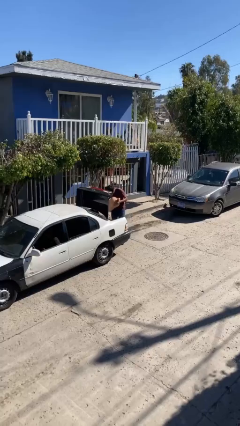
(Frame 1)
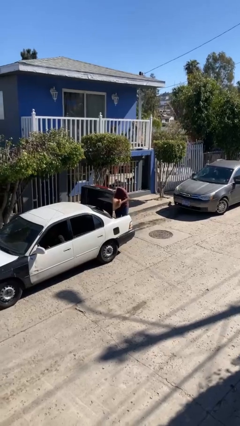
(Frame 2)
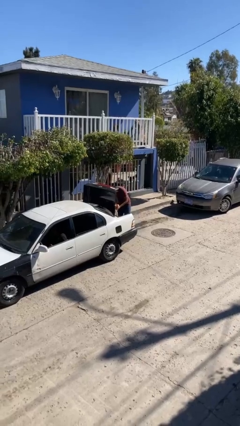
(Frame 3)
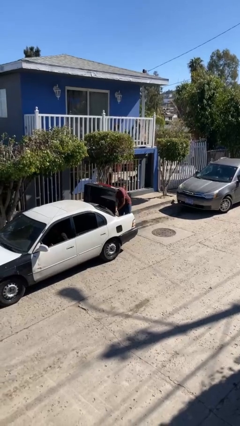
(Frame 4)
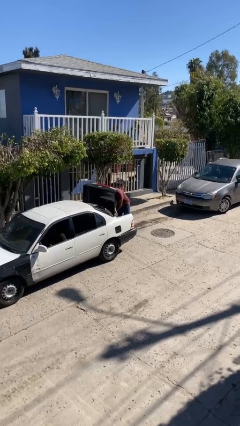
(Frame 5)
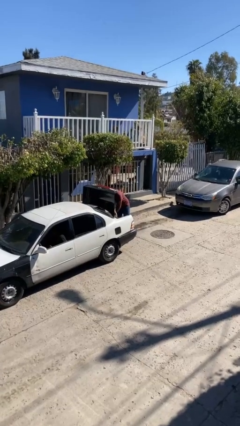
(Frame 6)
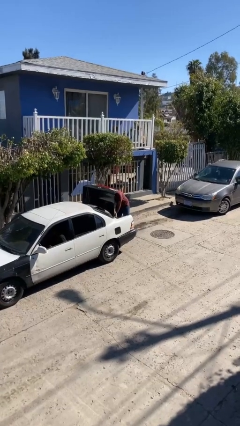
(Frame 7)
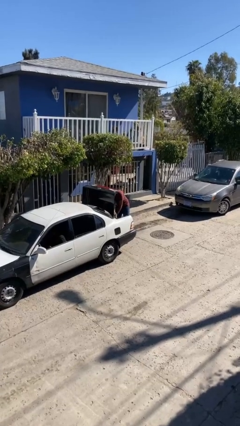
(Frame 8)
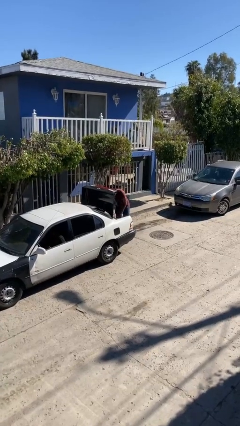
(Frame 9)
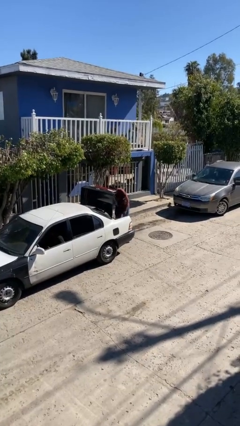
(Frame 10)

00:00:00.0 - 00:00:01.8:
person loads car

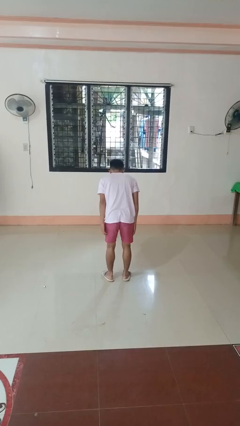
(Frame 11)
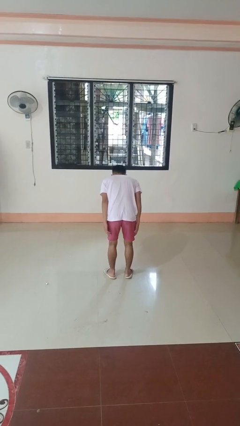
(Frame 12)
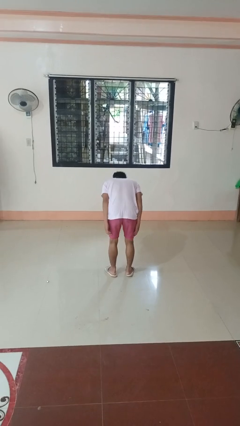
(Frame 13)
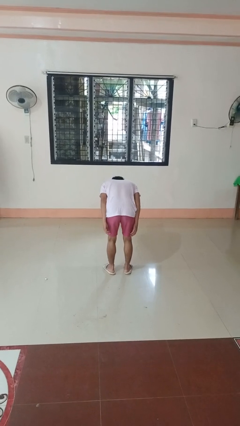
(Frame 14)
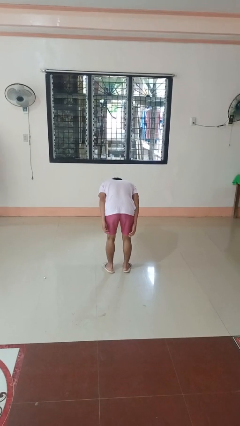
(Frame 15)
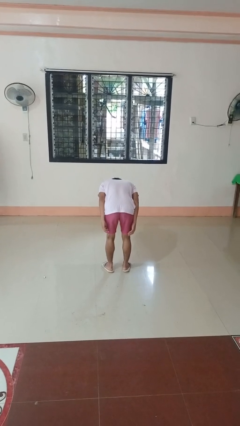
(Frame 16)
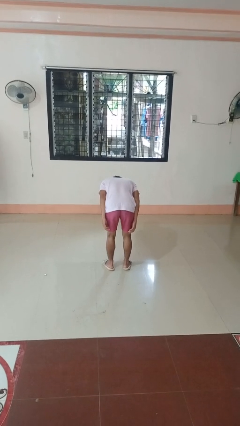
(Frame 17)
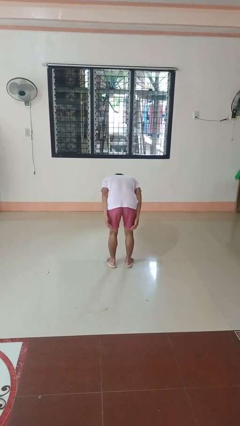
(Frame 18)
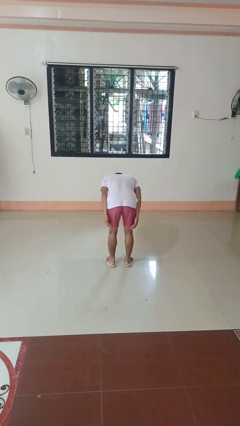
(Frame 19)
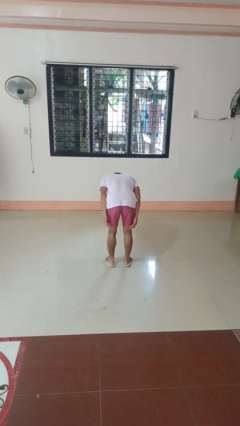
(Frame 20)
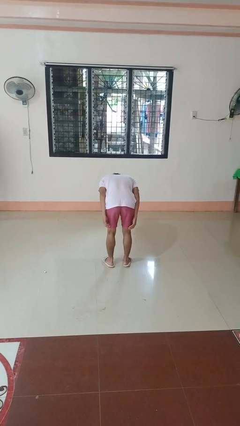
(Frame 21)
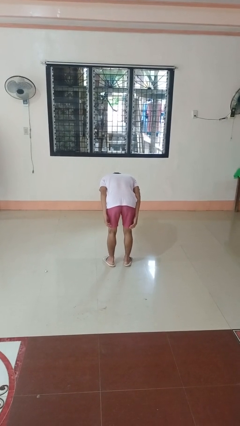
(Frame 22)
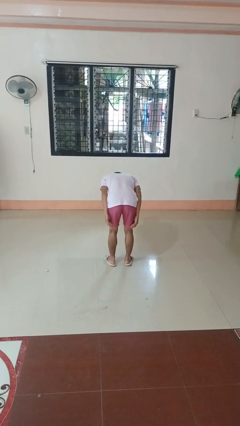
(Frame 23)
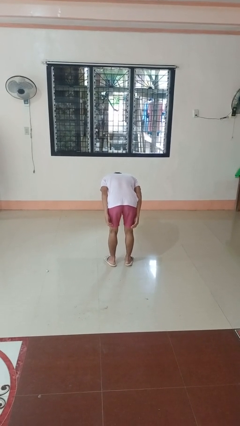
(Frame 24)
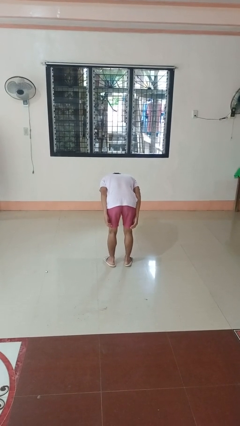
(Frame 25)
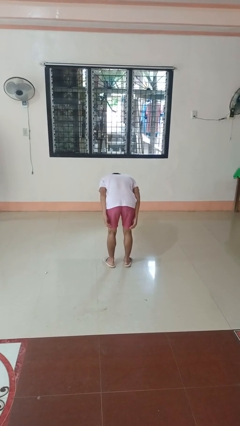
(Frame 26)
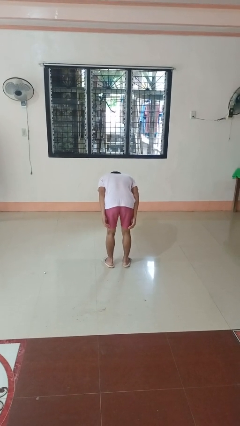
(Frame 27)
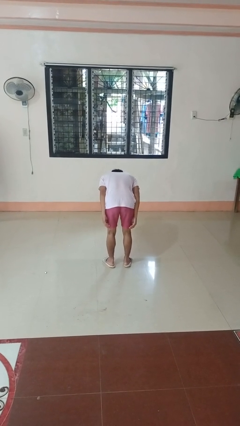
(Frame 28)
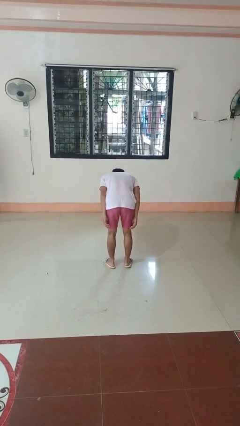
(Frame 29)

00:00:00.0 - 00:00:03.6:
person bows

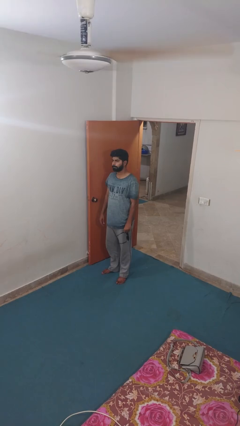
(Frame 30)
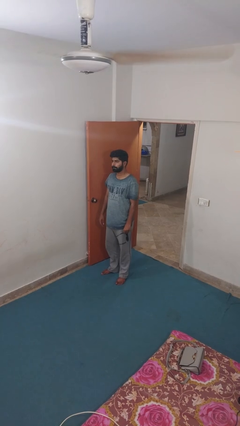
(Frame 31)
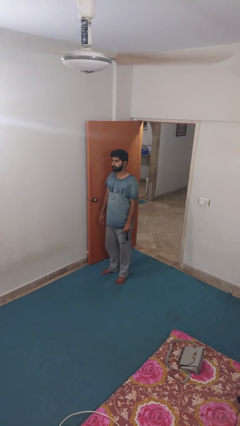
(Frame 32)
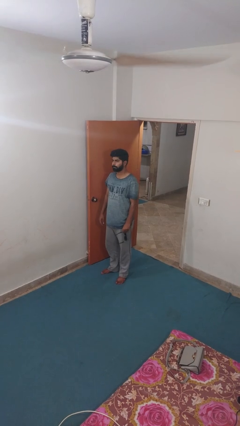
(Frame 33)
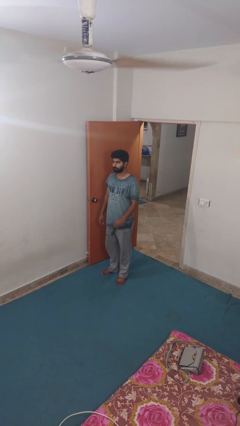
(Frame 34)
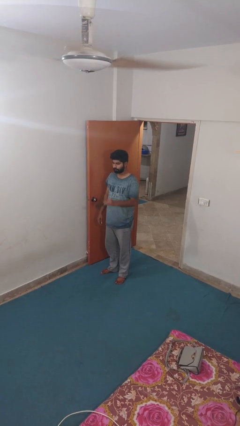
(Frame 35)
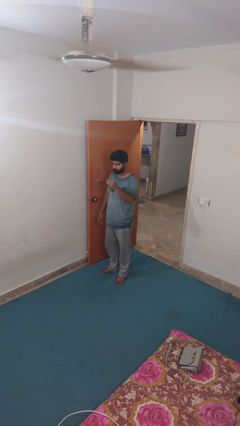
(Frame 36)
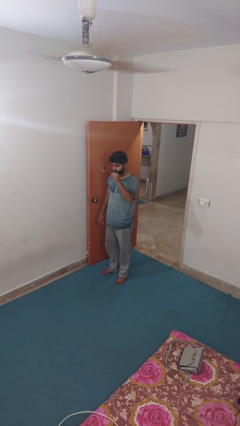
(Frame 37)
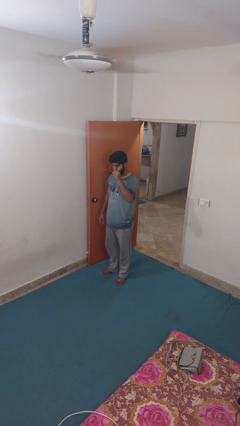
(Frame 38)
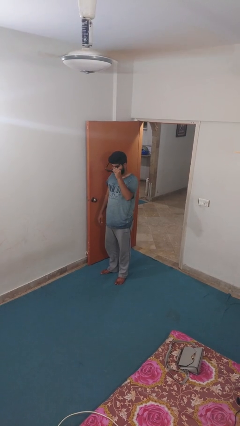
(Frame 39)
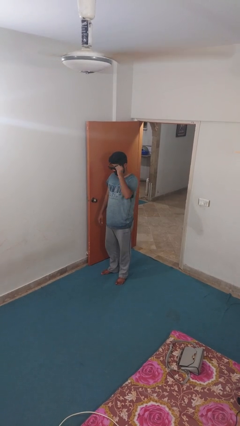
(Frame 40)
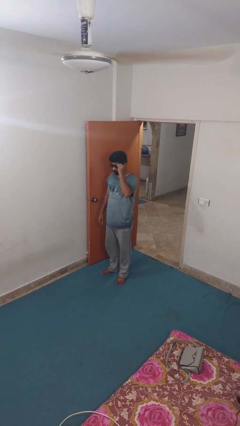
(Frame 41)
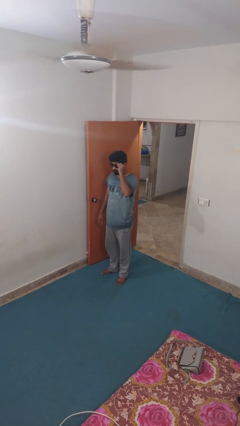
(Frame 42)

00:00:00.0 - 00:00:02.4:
person puts on sunglasses

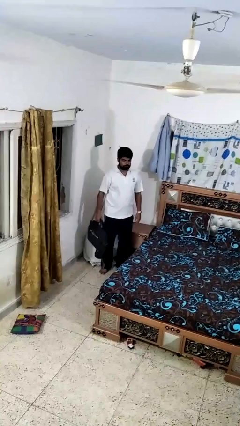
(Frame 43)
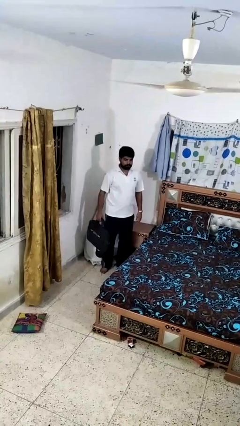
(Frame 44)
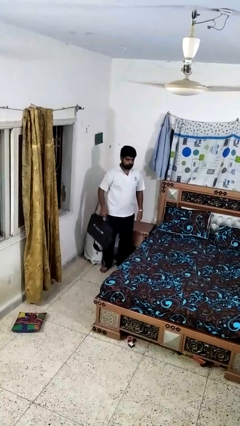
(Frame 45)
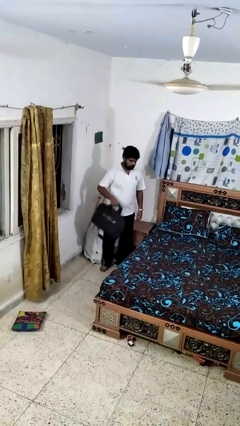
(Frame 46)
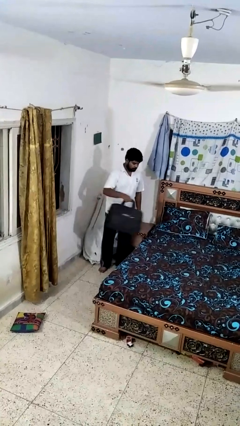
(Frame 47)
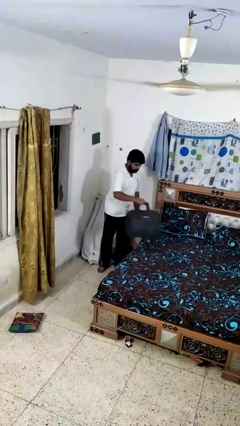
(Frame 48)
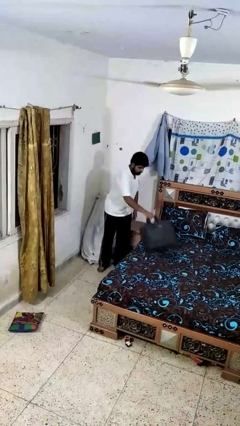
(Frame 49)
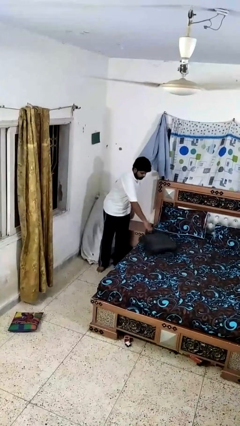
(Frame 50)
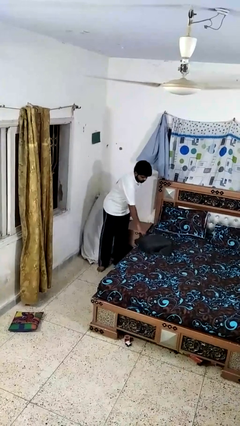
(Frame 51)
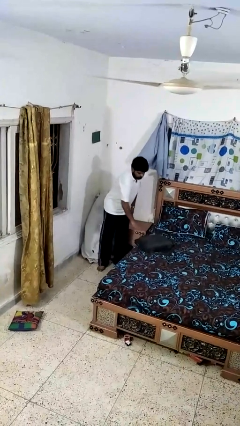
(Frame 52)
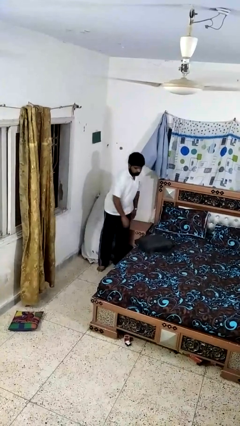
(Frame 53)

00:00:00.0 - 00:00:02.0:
person puts down object on bed

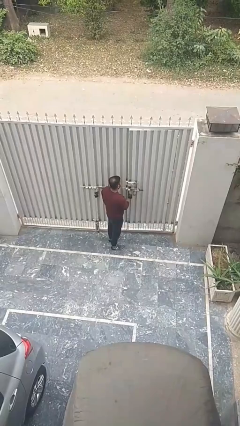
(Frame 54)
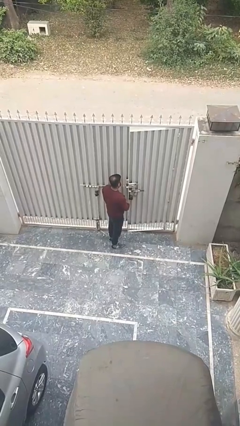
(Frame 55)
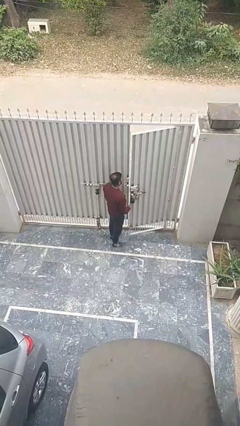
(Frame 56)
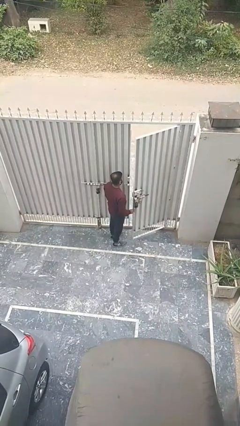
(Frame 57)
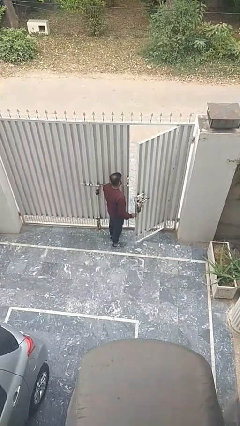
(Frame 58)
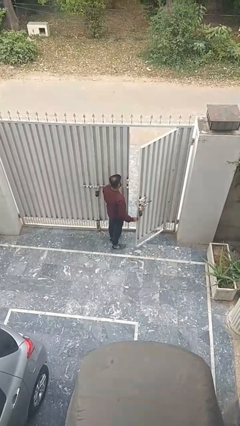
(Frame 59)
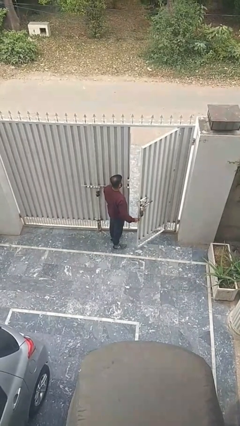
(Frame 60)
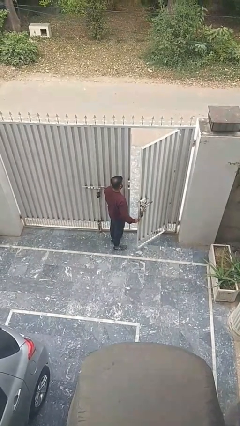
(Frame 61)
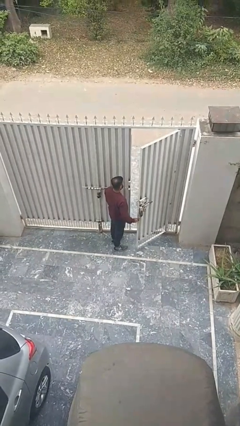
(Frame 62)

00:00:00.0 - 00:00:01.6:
person opens facility door

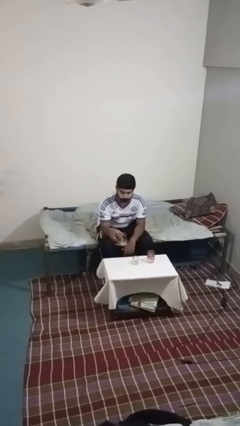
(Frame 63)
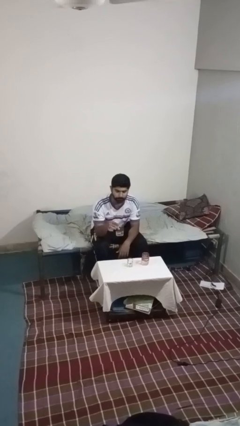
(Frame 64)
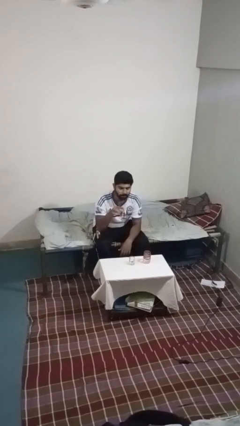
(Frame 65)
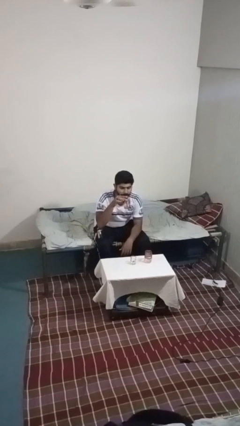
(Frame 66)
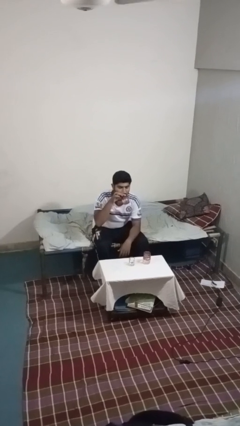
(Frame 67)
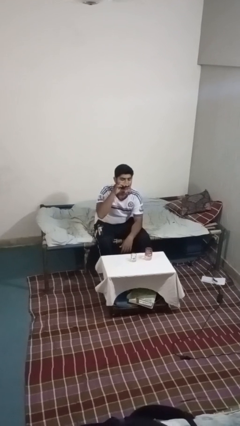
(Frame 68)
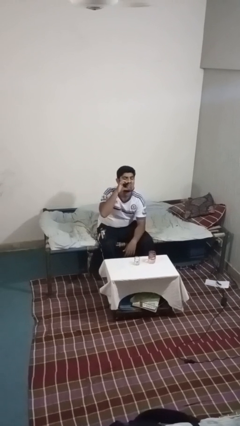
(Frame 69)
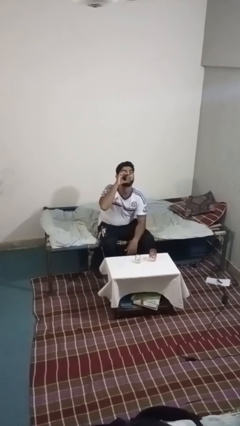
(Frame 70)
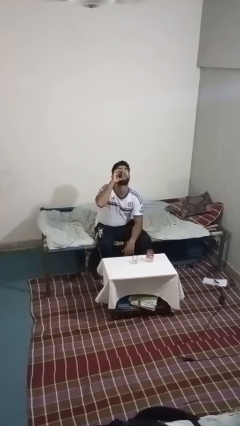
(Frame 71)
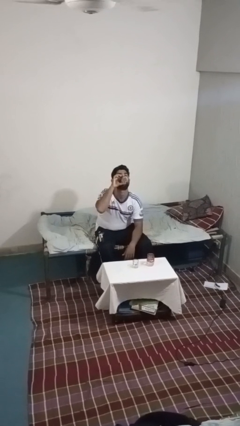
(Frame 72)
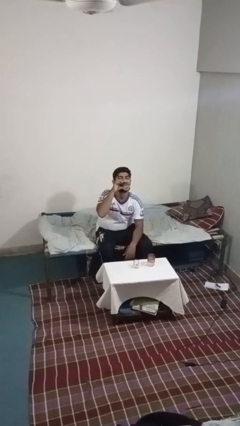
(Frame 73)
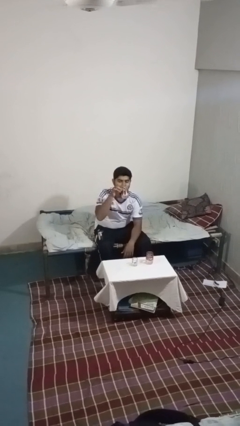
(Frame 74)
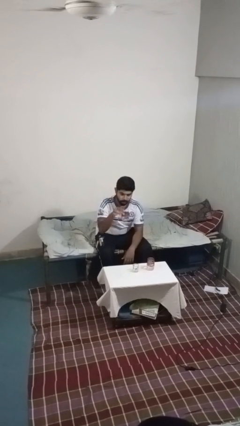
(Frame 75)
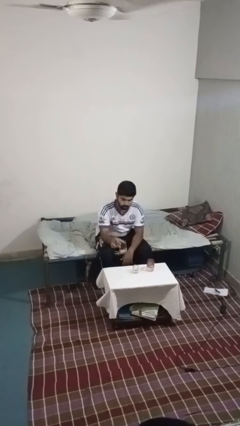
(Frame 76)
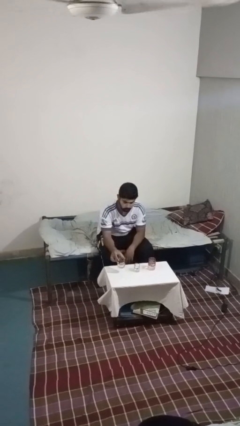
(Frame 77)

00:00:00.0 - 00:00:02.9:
person drinks from shotglass

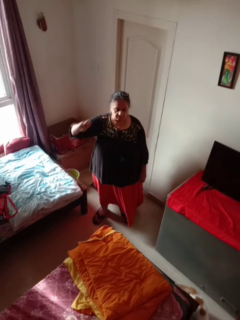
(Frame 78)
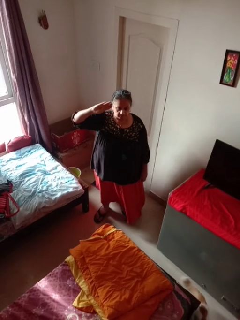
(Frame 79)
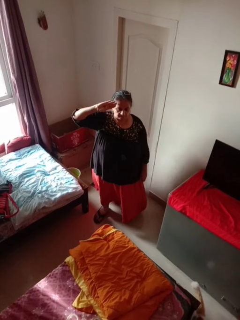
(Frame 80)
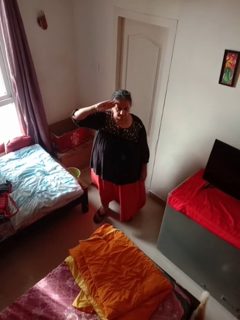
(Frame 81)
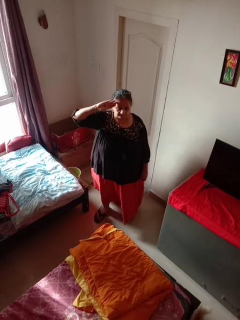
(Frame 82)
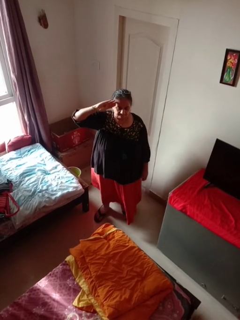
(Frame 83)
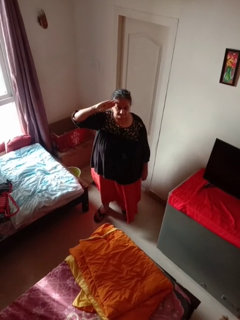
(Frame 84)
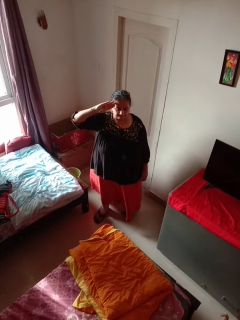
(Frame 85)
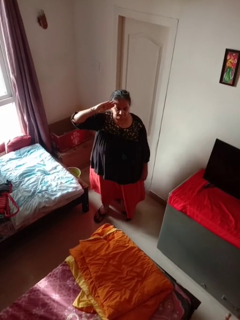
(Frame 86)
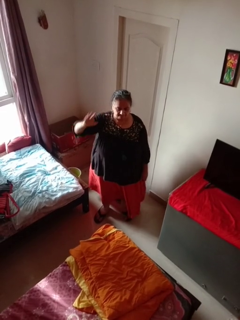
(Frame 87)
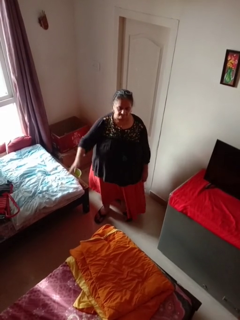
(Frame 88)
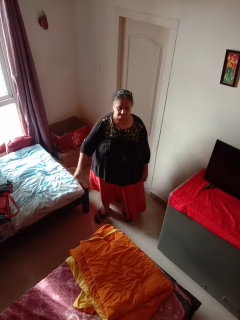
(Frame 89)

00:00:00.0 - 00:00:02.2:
person salutes

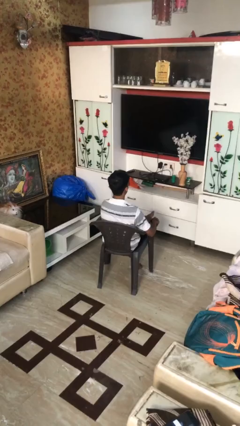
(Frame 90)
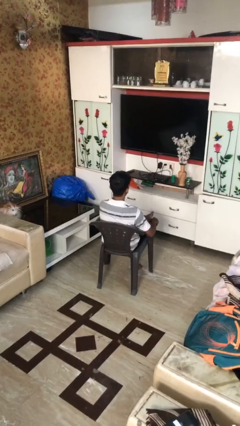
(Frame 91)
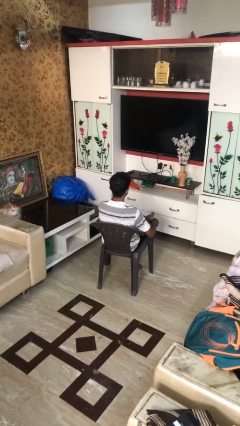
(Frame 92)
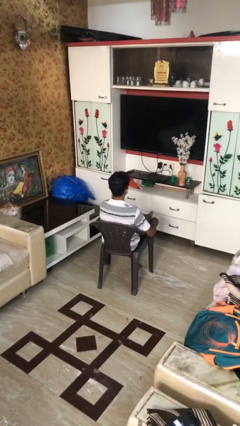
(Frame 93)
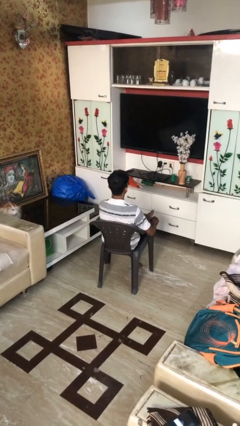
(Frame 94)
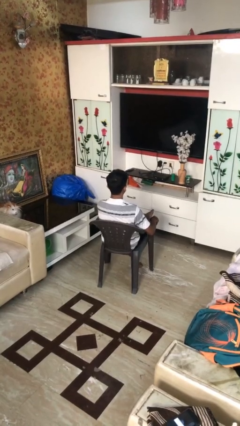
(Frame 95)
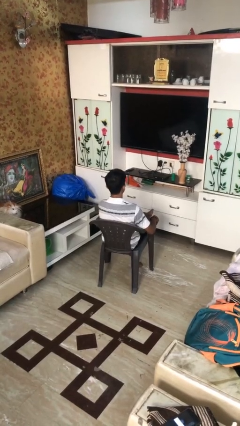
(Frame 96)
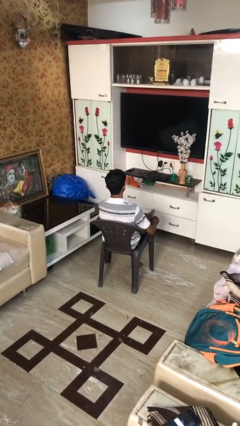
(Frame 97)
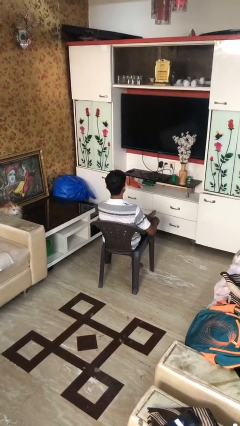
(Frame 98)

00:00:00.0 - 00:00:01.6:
person swats bug
